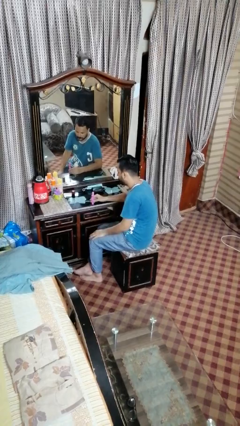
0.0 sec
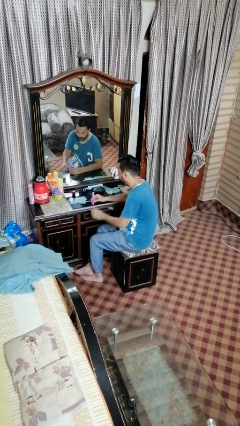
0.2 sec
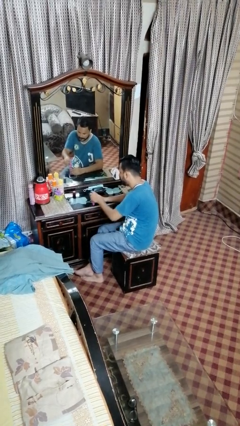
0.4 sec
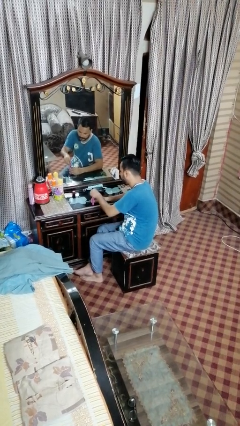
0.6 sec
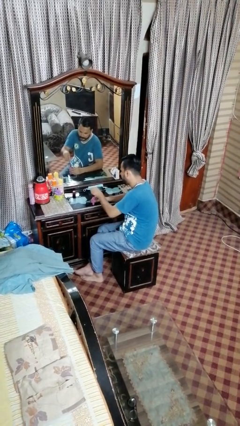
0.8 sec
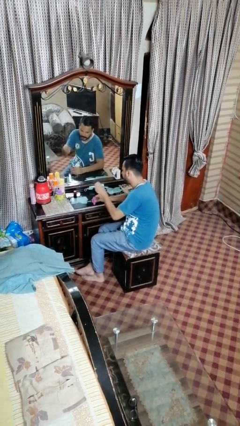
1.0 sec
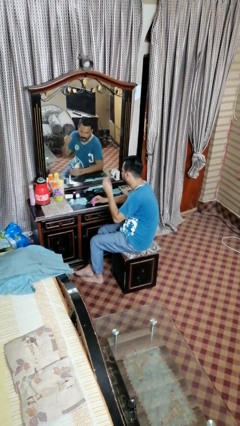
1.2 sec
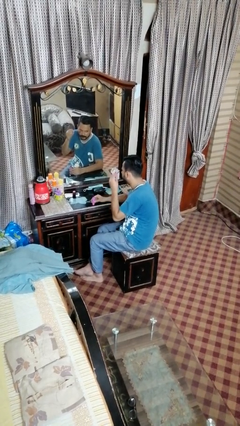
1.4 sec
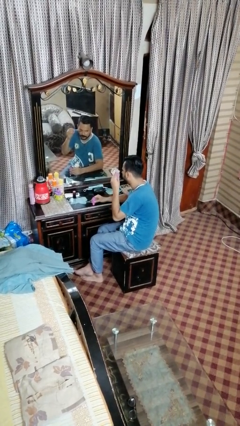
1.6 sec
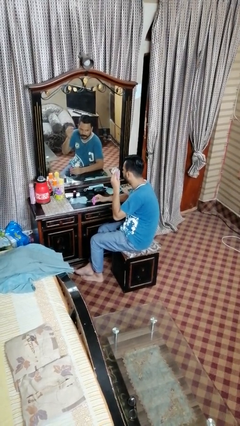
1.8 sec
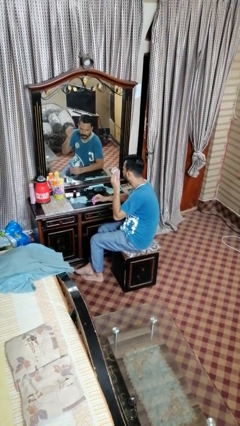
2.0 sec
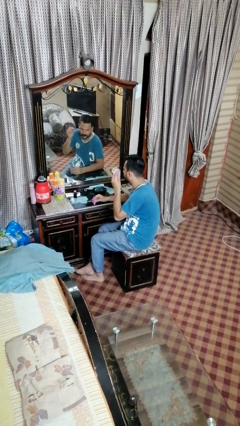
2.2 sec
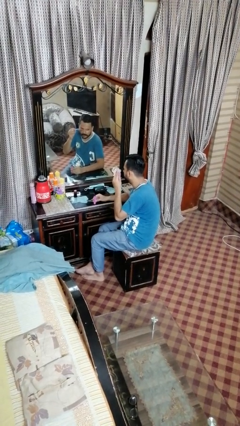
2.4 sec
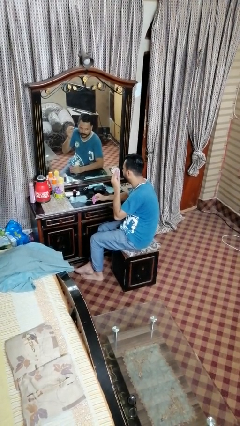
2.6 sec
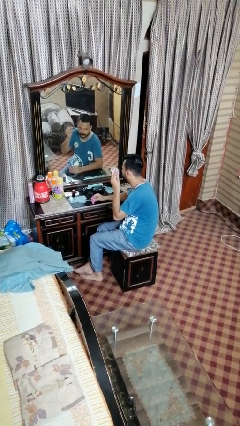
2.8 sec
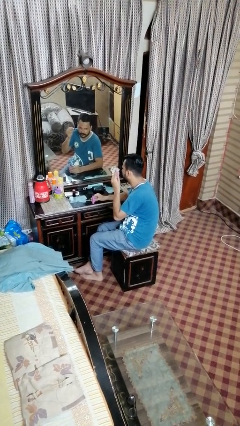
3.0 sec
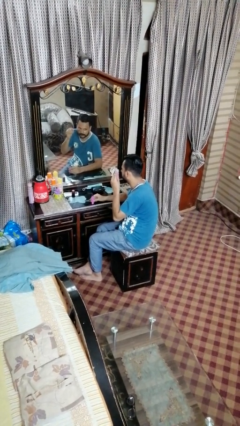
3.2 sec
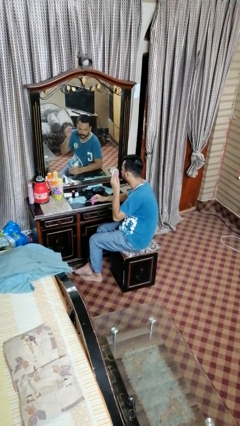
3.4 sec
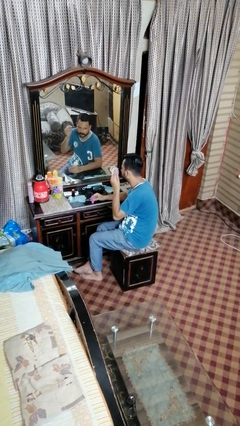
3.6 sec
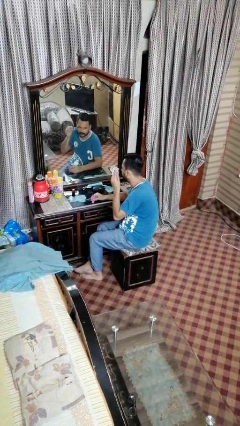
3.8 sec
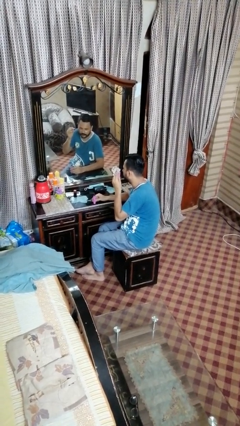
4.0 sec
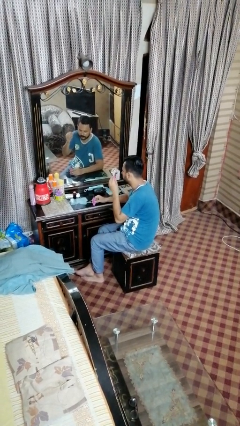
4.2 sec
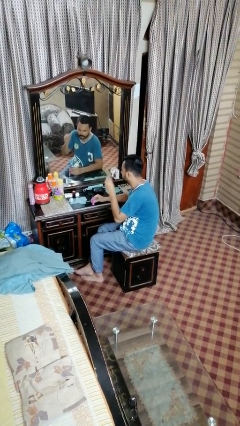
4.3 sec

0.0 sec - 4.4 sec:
person applies eye makeup

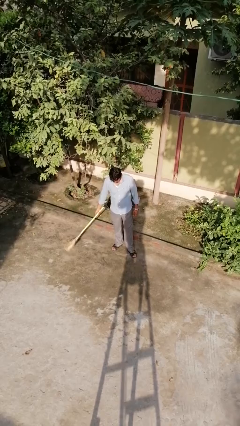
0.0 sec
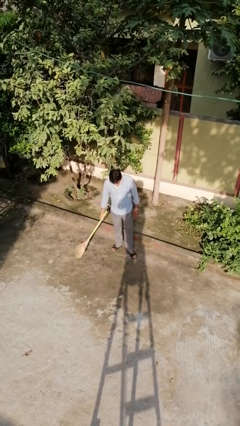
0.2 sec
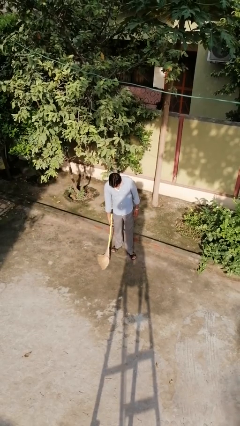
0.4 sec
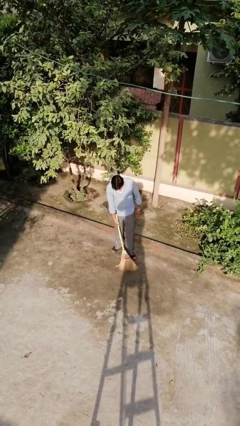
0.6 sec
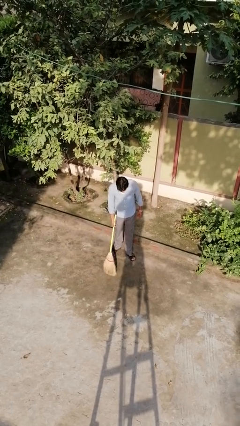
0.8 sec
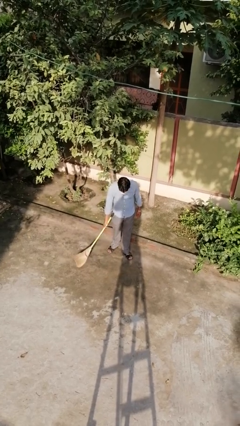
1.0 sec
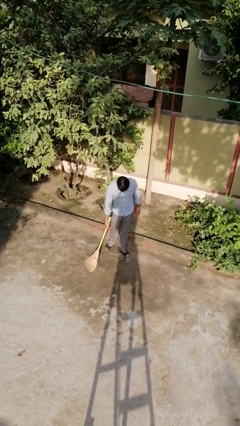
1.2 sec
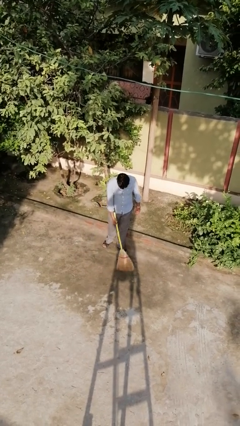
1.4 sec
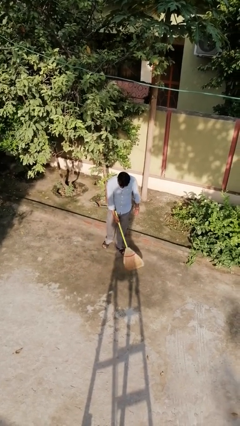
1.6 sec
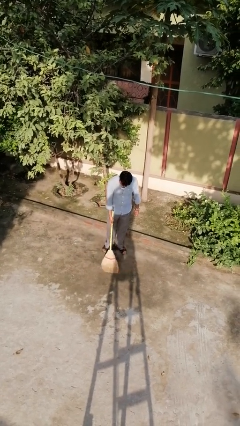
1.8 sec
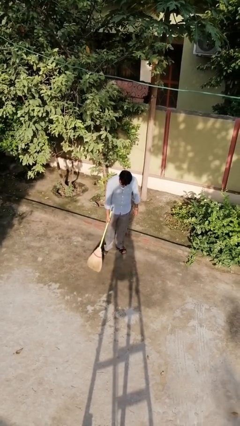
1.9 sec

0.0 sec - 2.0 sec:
person sweeps floor

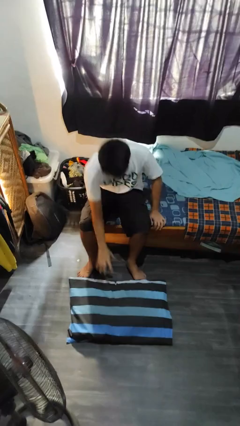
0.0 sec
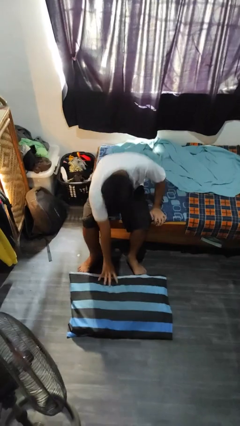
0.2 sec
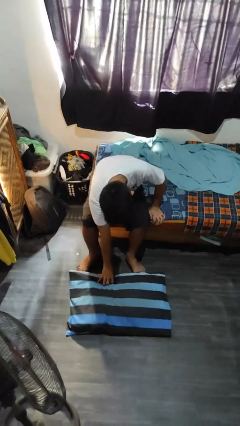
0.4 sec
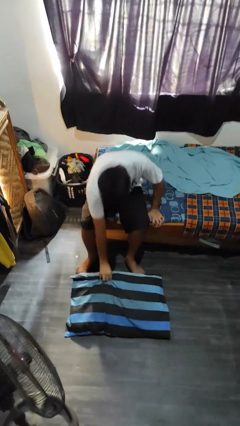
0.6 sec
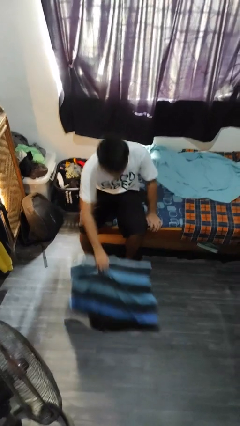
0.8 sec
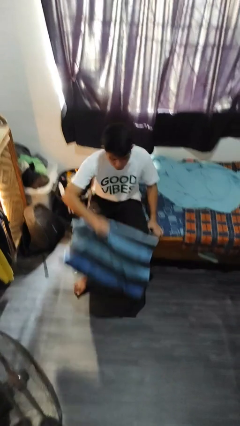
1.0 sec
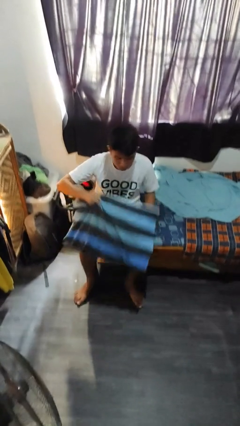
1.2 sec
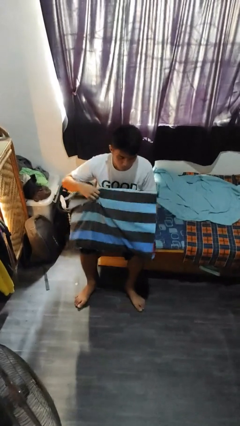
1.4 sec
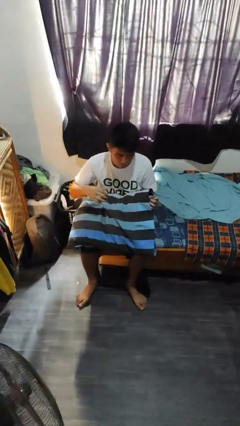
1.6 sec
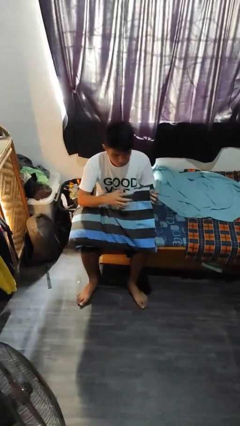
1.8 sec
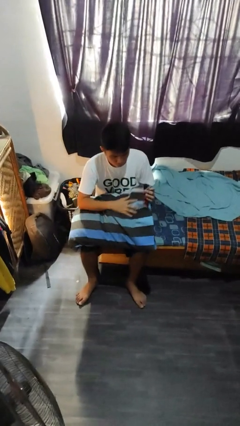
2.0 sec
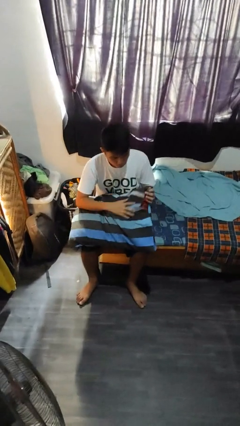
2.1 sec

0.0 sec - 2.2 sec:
person picks up object from floor

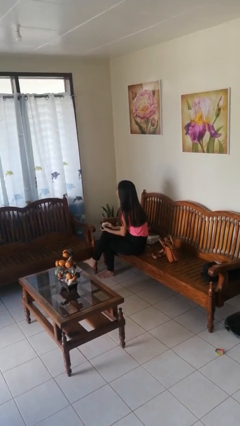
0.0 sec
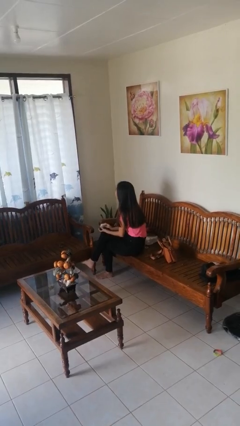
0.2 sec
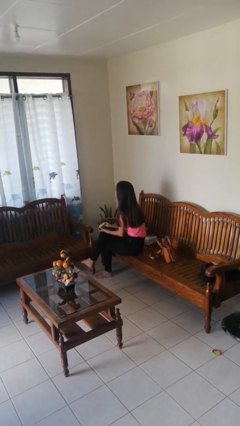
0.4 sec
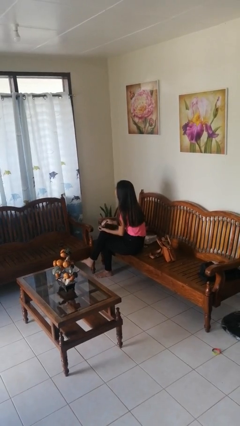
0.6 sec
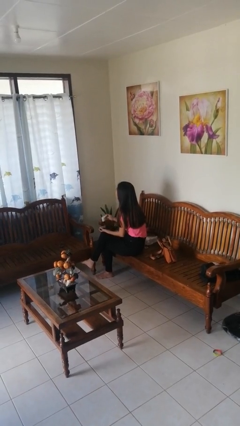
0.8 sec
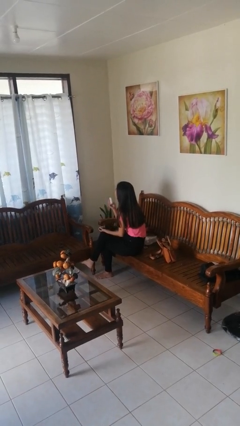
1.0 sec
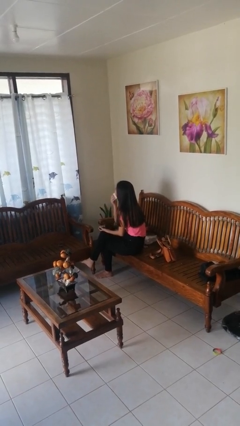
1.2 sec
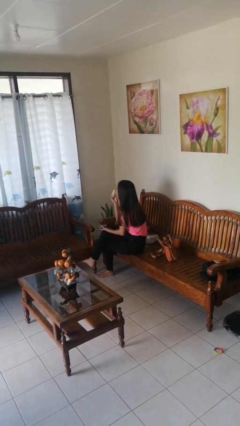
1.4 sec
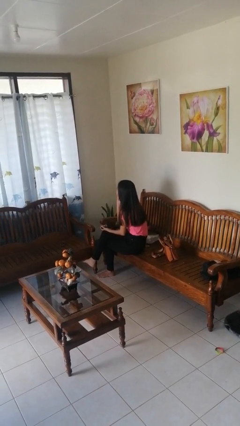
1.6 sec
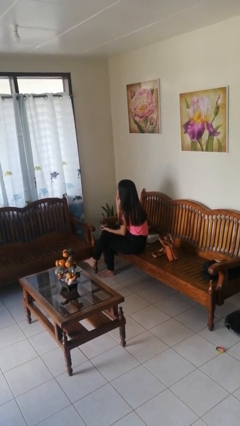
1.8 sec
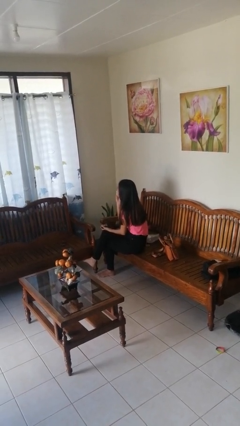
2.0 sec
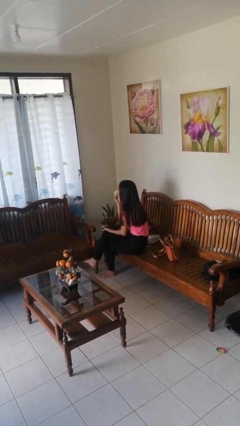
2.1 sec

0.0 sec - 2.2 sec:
person applies foundation makeup

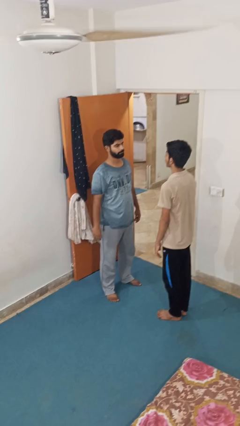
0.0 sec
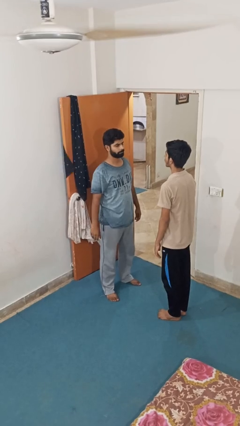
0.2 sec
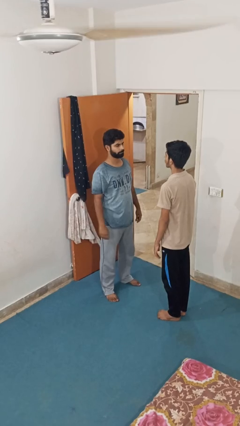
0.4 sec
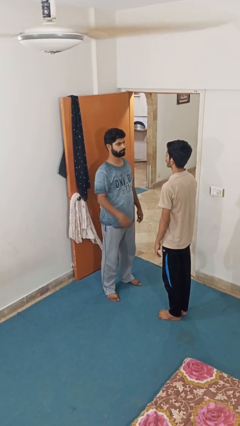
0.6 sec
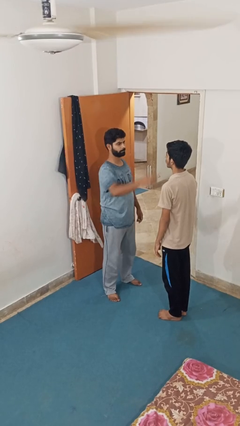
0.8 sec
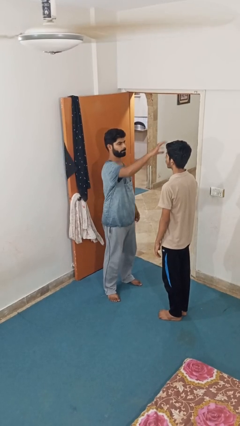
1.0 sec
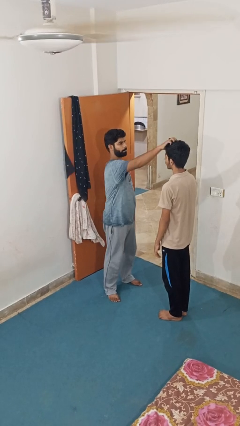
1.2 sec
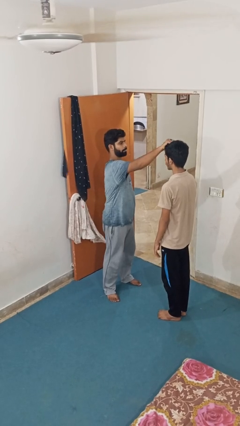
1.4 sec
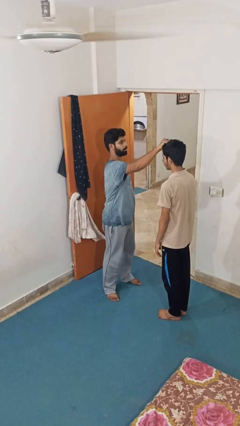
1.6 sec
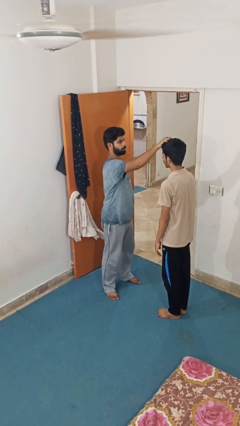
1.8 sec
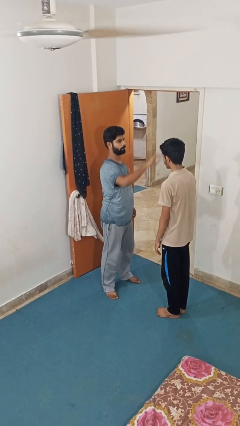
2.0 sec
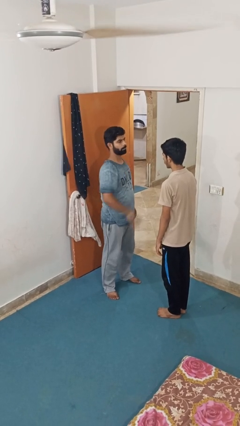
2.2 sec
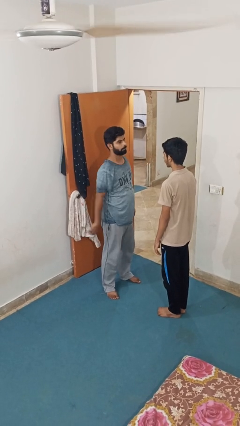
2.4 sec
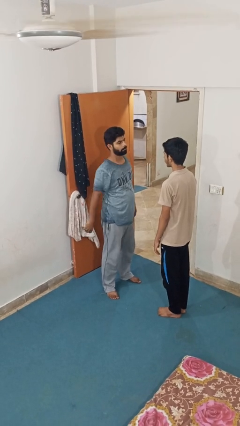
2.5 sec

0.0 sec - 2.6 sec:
person grabs person by hair

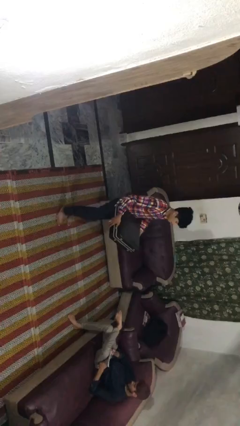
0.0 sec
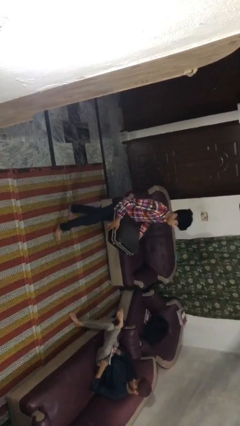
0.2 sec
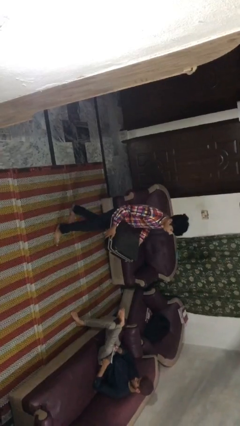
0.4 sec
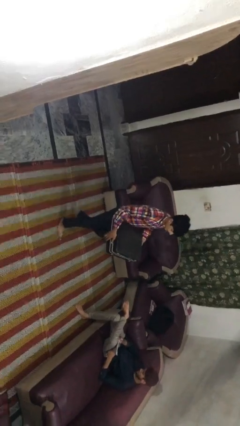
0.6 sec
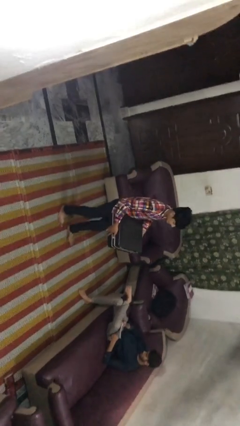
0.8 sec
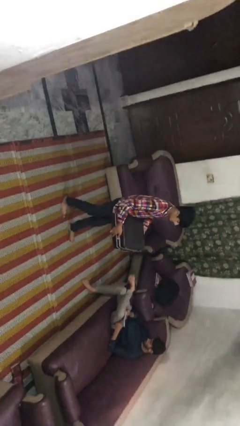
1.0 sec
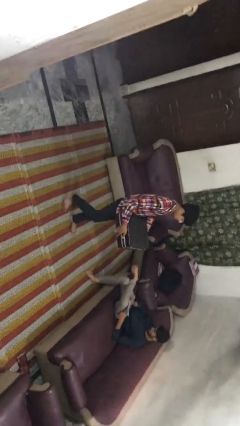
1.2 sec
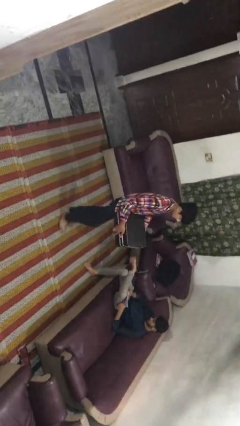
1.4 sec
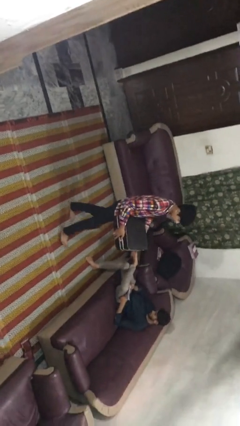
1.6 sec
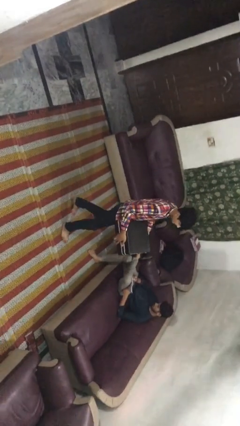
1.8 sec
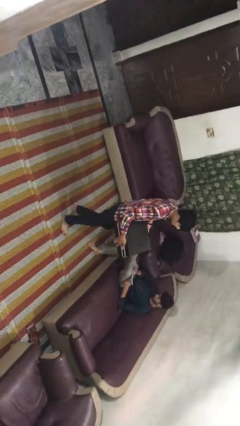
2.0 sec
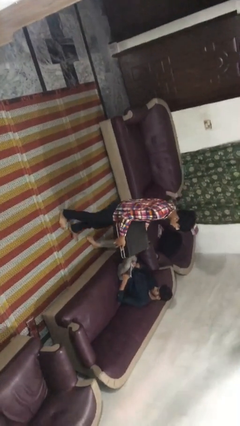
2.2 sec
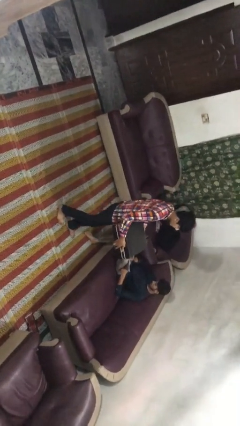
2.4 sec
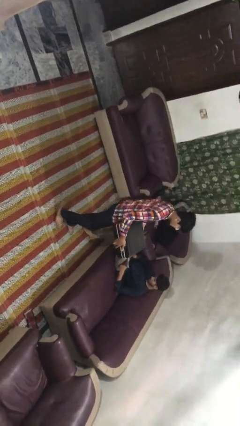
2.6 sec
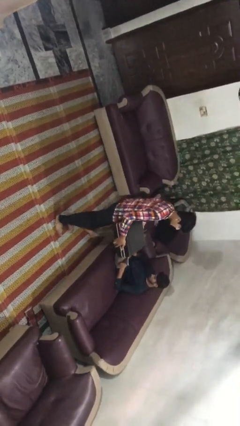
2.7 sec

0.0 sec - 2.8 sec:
person carries heavy object

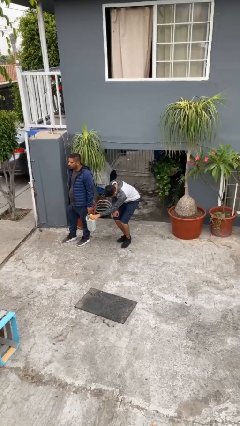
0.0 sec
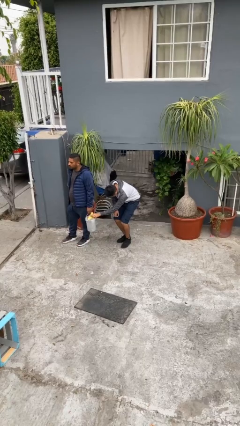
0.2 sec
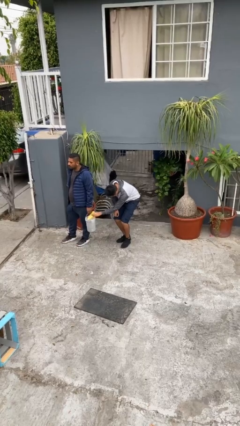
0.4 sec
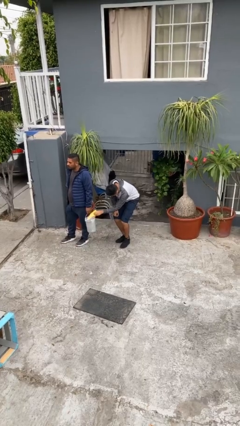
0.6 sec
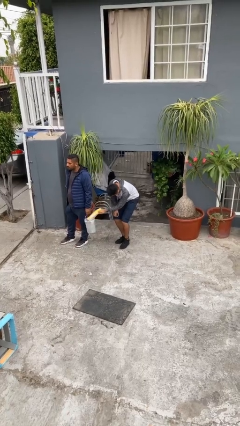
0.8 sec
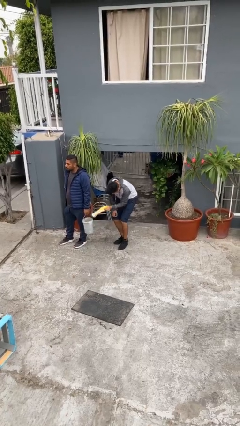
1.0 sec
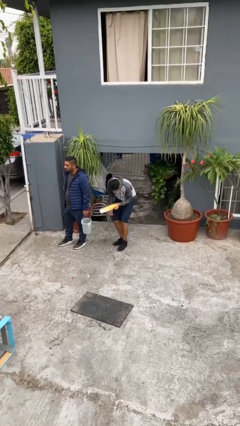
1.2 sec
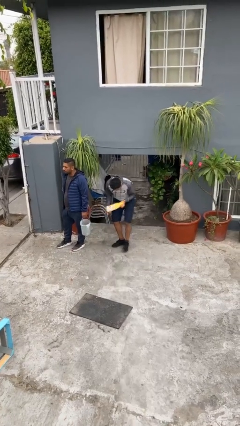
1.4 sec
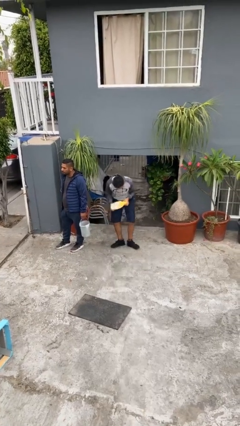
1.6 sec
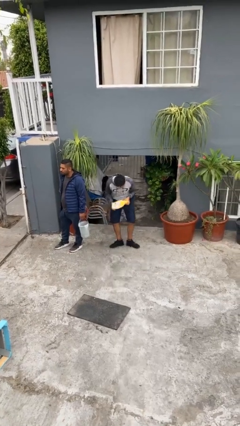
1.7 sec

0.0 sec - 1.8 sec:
person steals object from person
